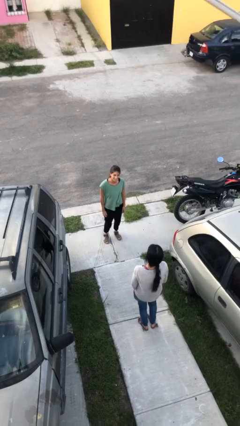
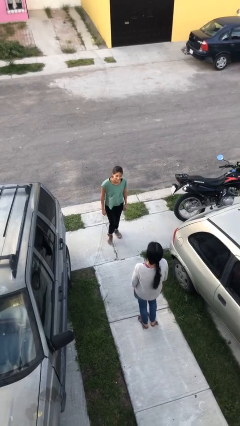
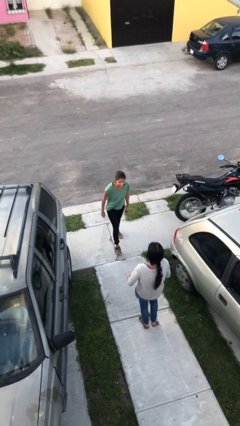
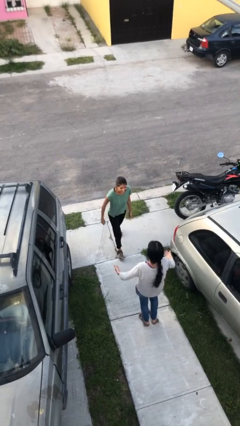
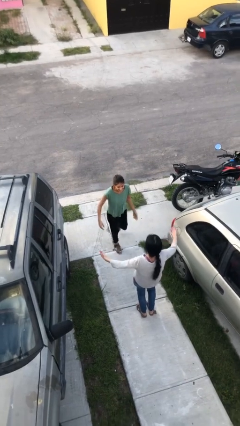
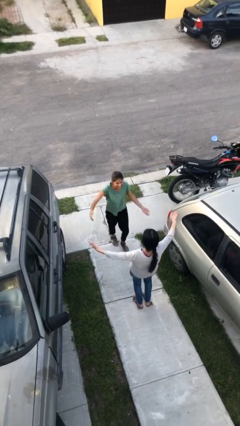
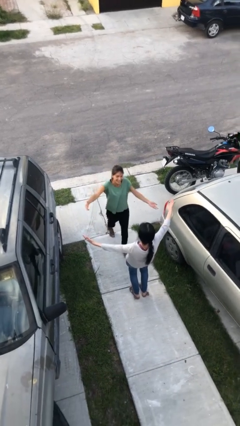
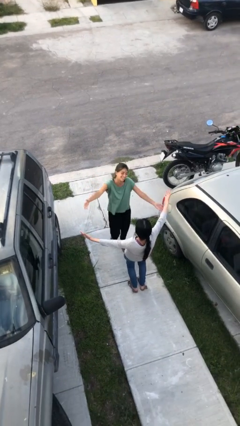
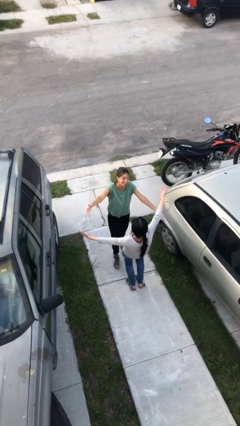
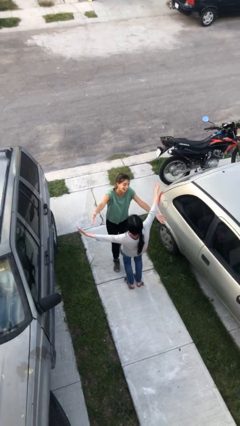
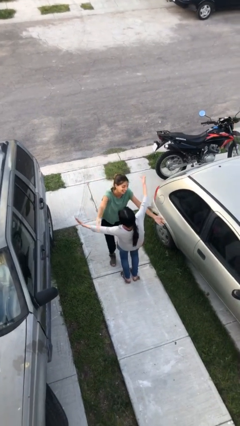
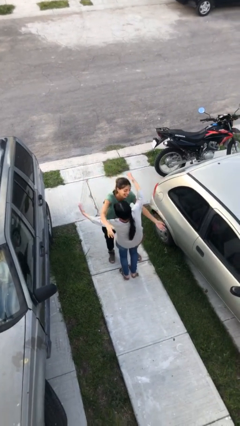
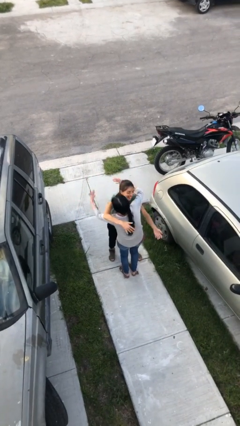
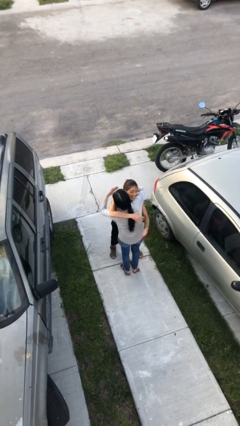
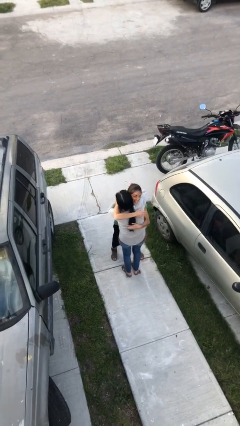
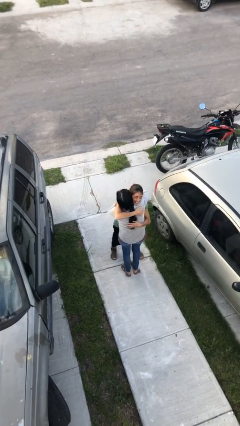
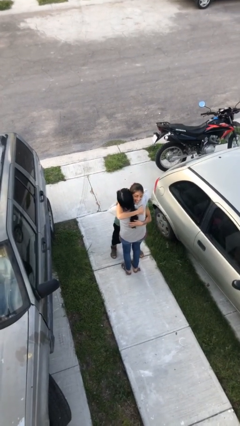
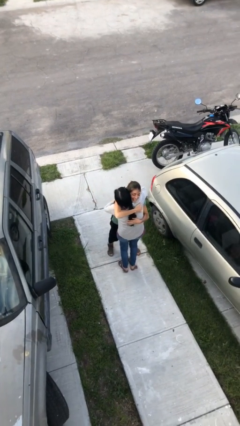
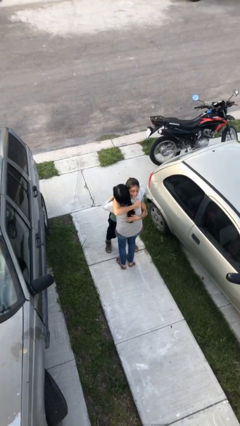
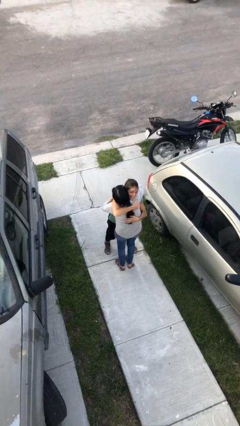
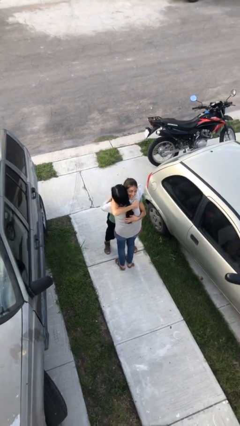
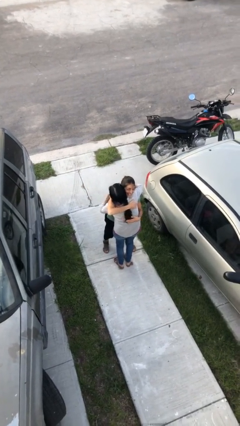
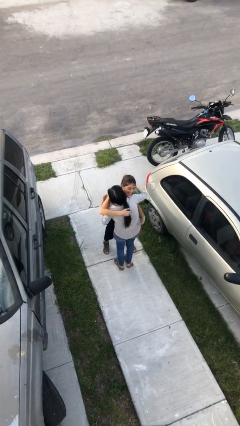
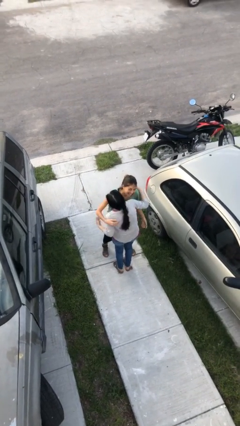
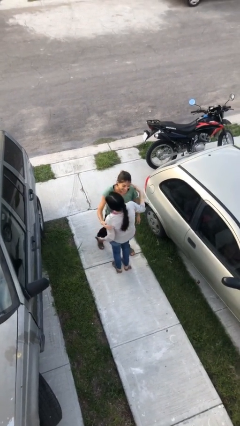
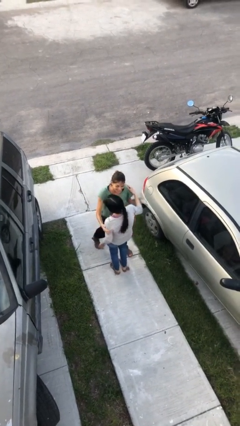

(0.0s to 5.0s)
person embraces person

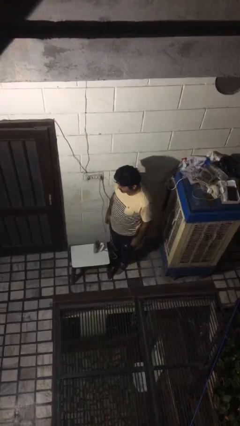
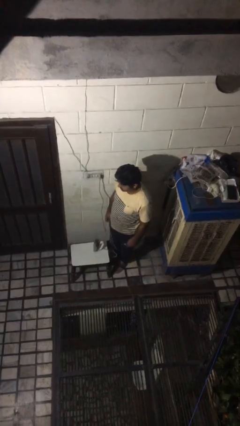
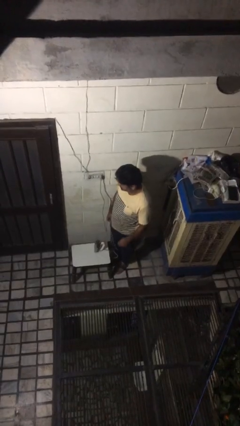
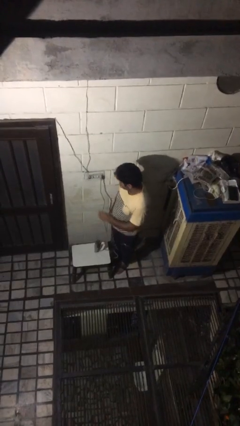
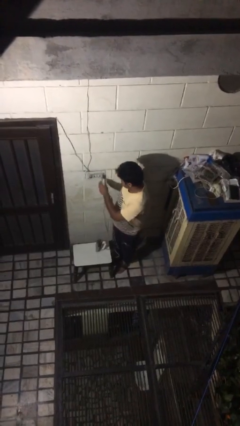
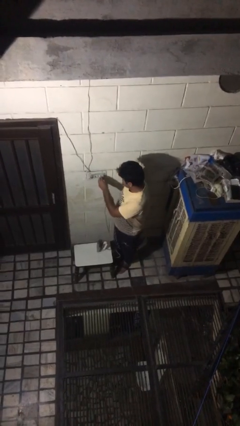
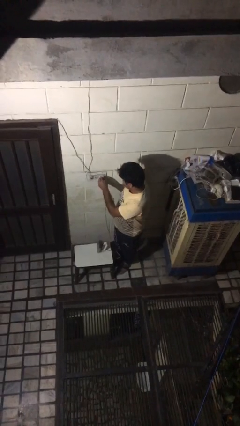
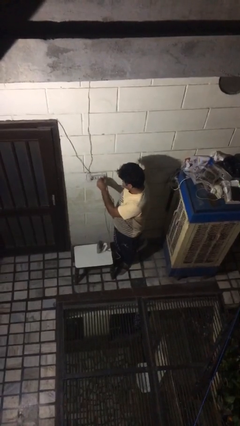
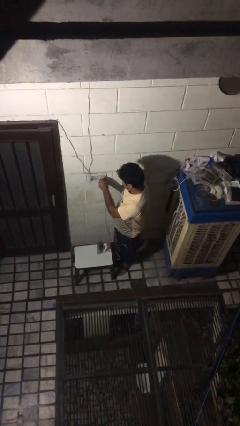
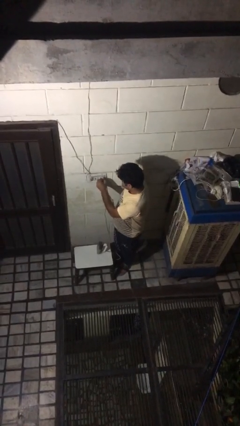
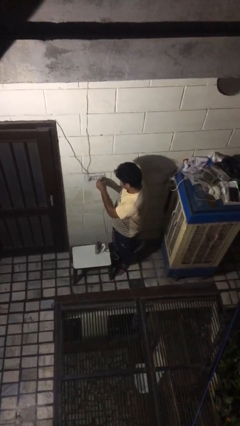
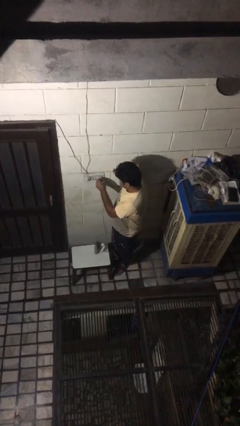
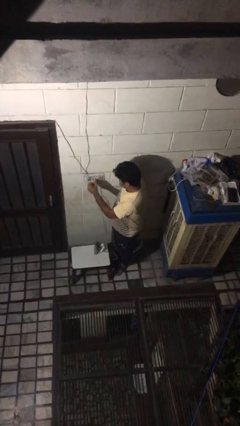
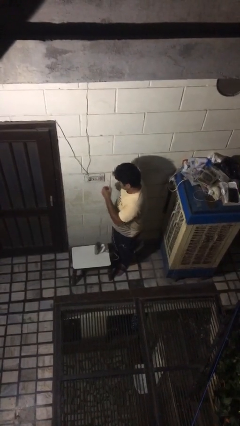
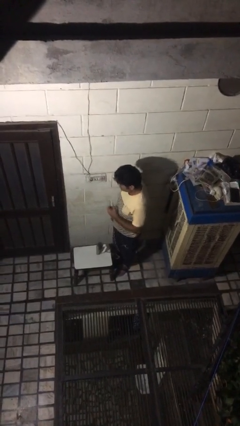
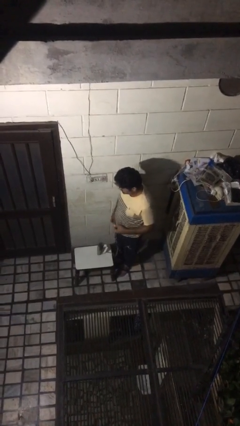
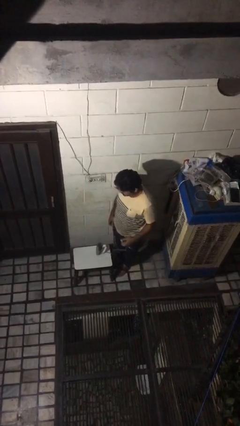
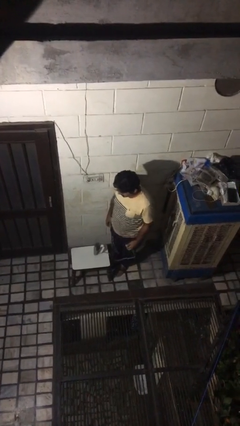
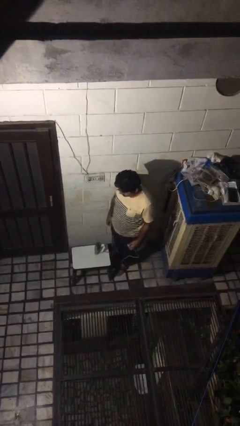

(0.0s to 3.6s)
person unplugs from electrical socket

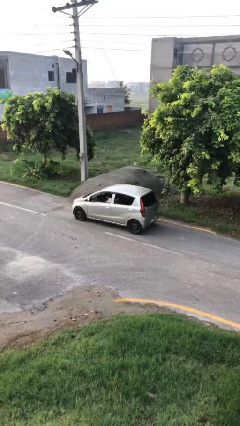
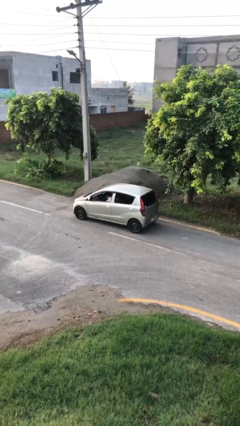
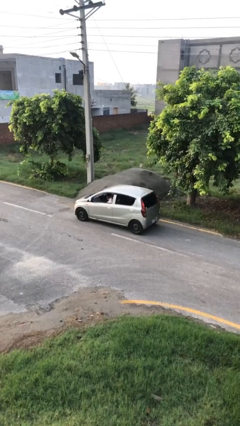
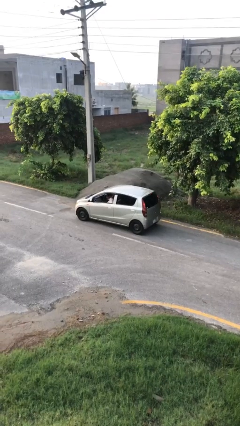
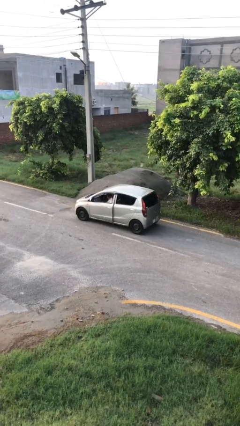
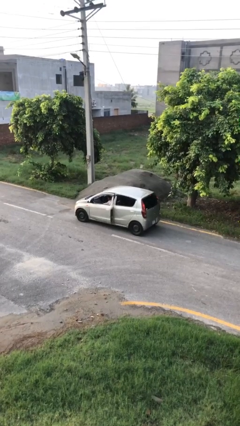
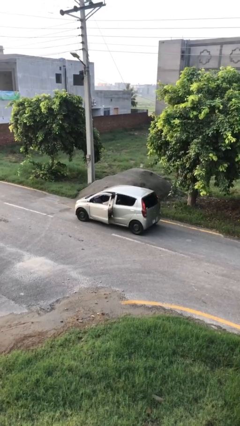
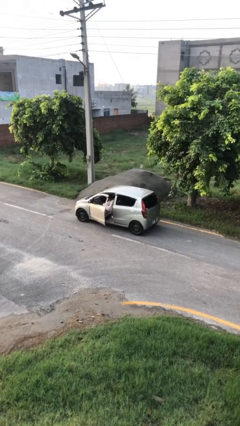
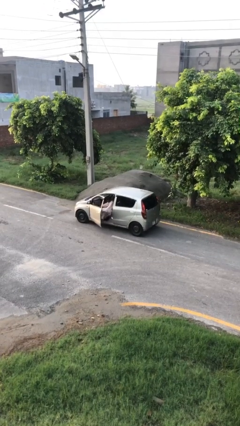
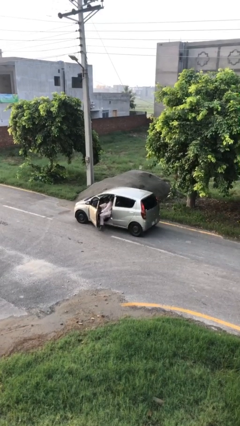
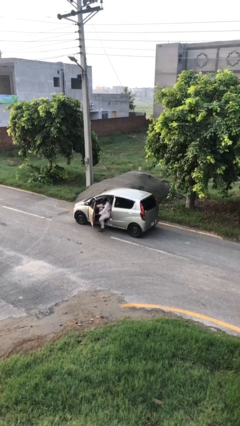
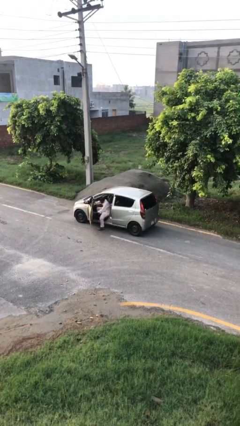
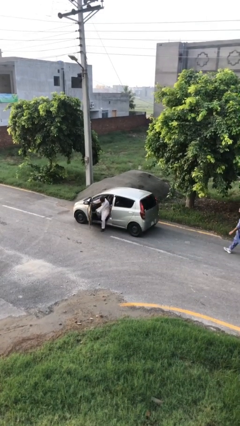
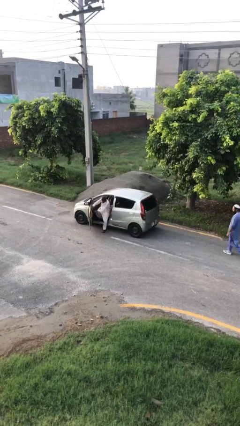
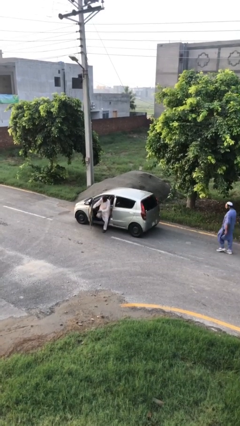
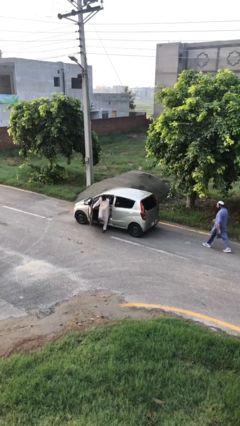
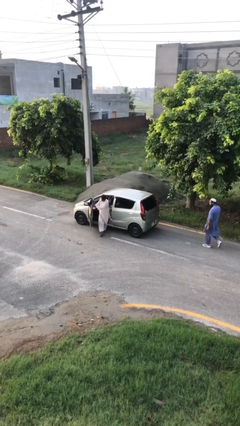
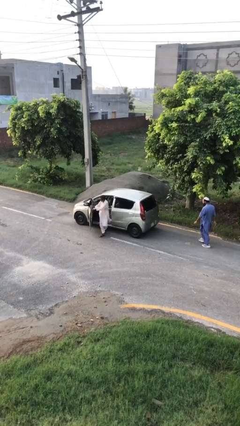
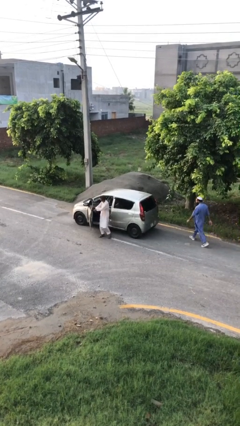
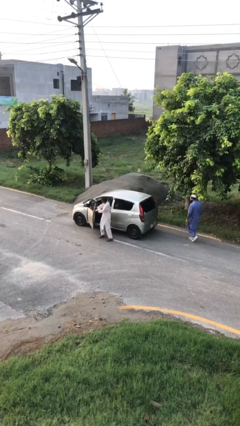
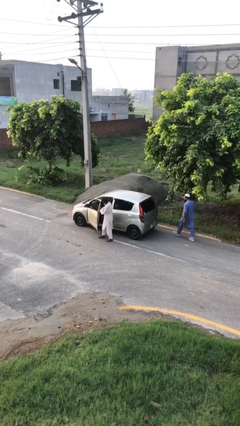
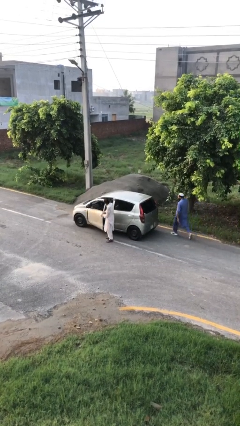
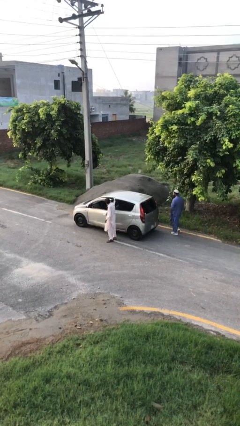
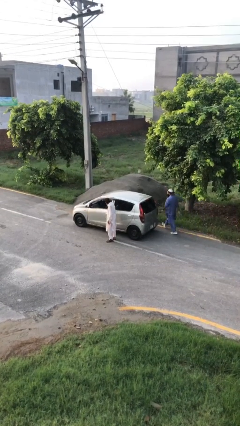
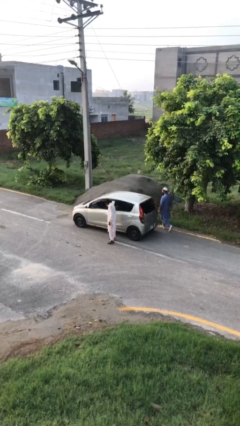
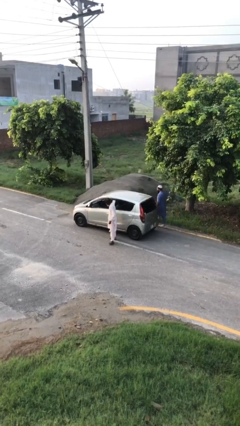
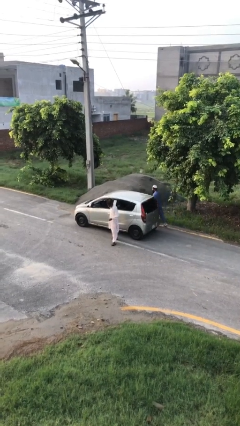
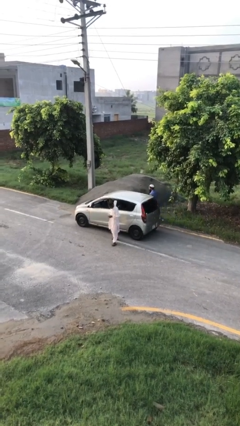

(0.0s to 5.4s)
car drops off person

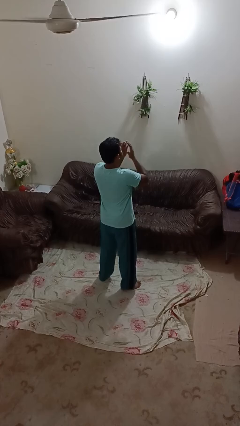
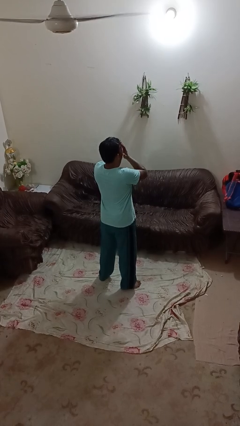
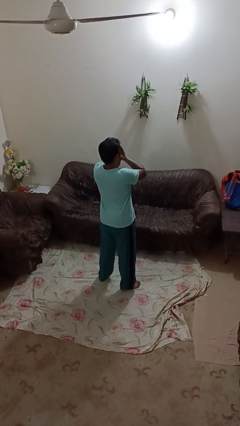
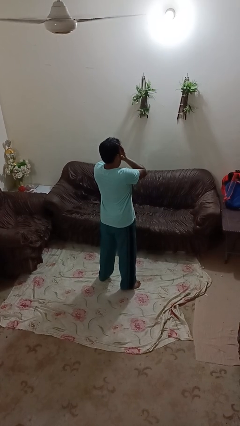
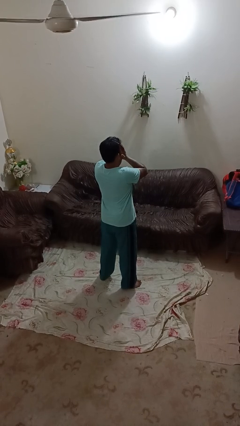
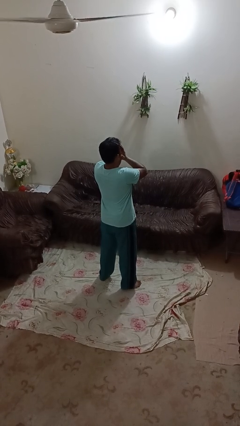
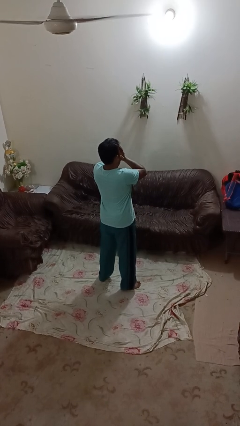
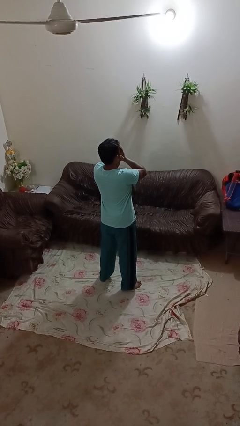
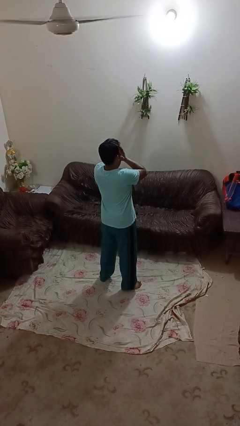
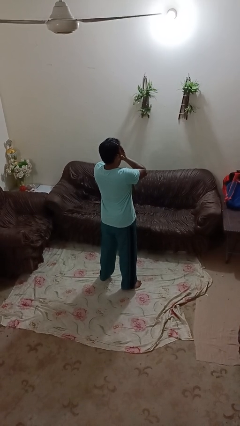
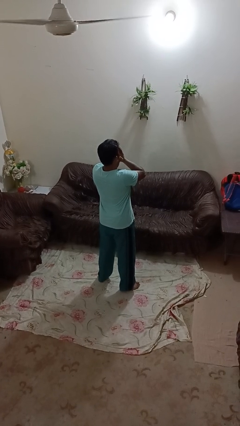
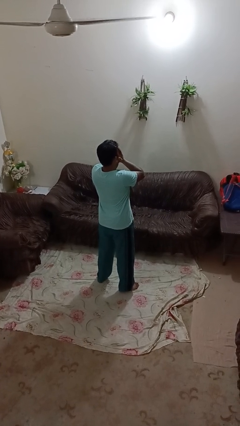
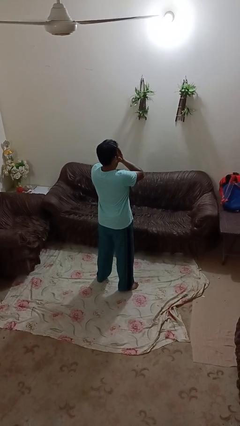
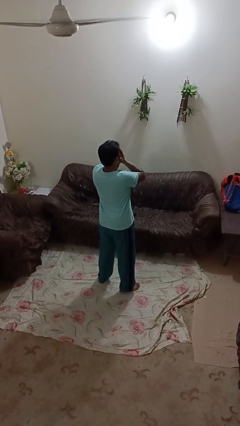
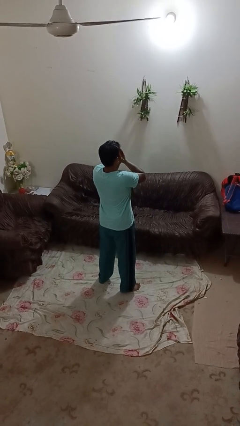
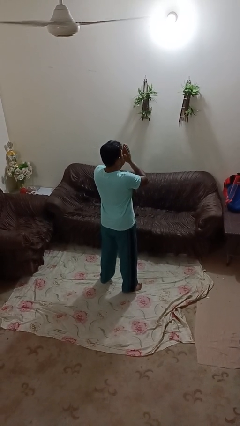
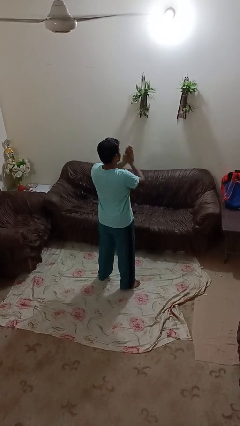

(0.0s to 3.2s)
person covers face with hands

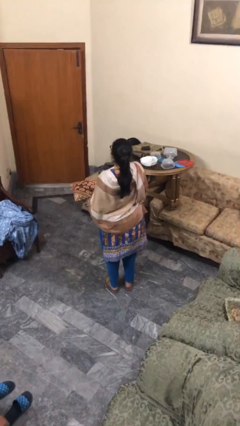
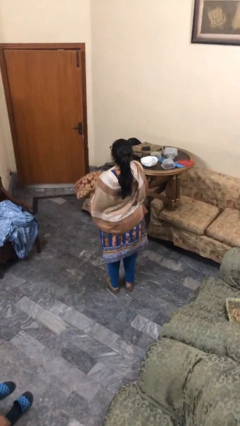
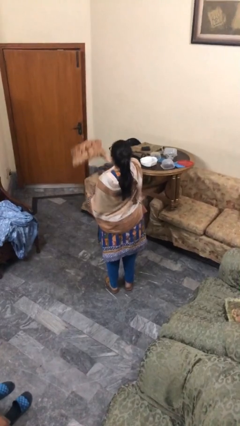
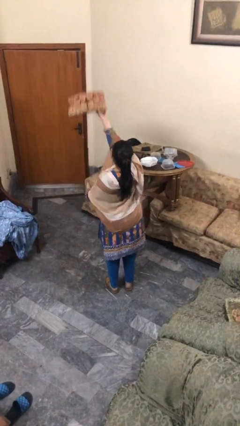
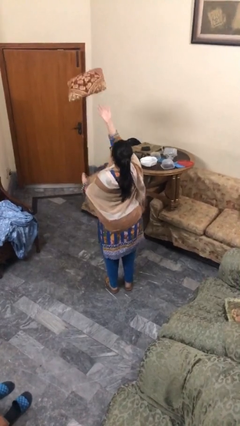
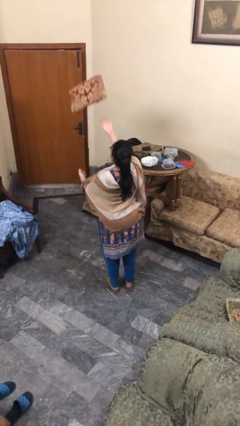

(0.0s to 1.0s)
person drops object
